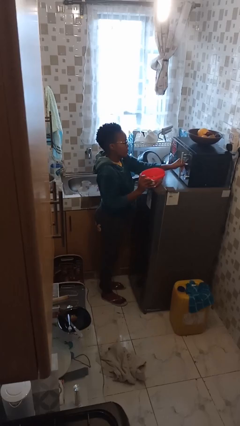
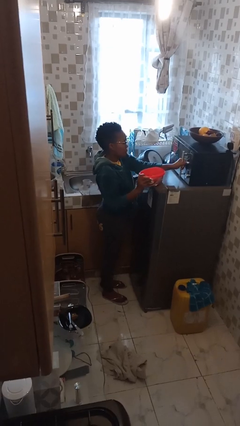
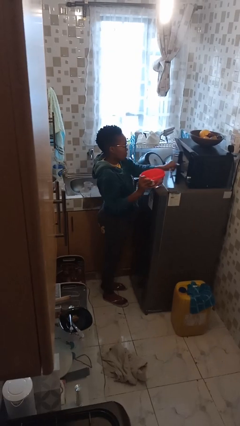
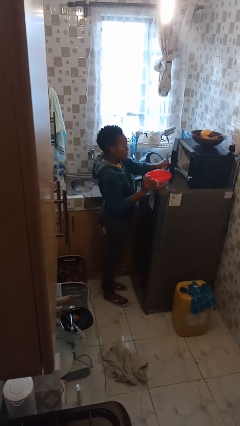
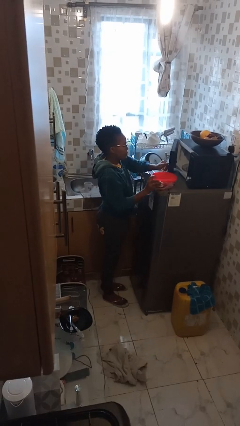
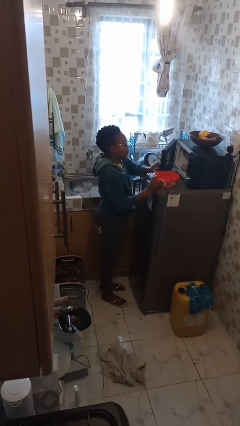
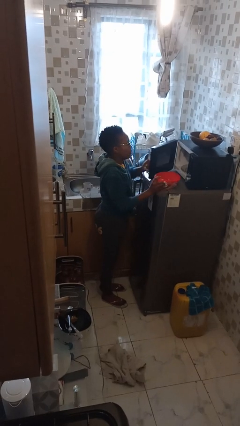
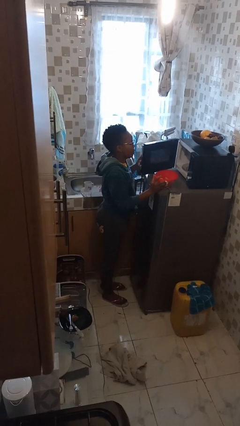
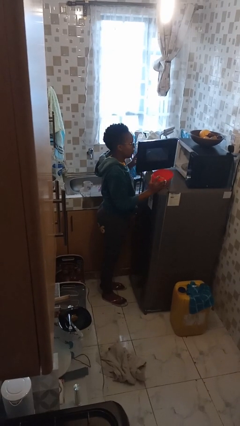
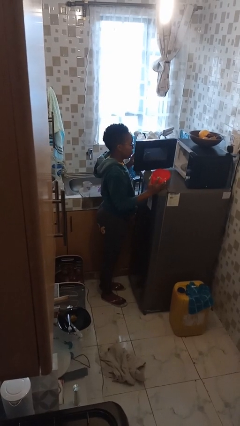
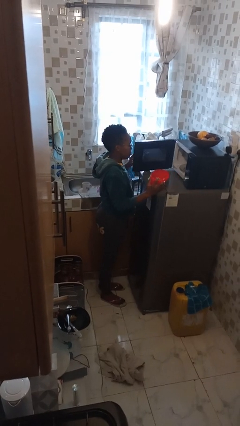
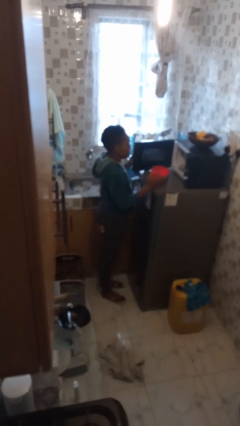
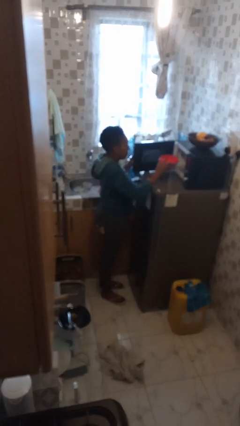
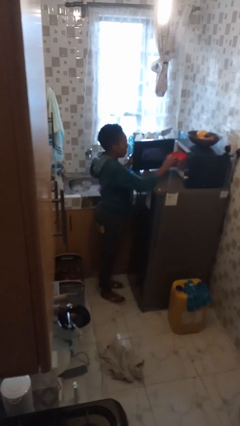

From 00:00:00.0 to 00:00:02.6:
person opens microwave

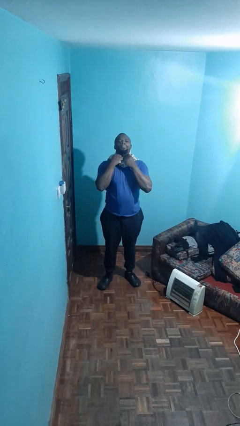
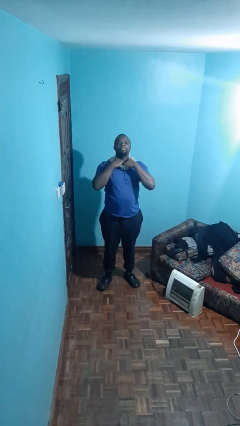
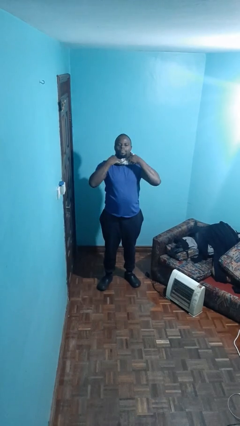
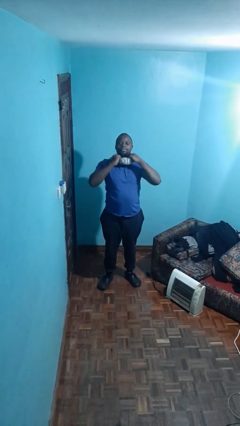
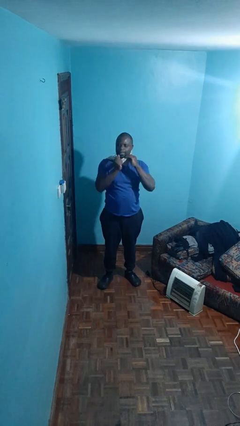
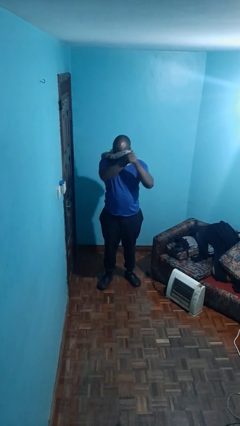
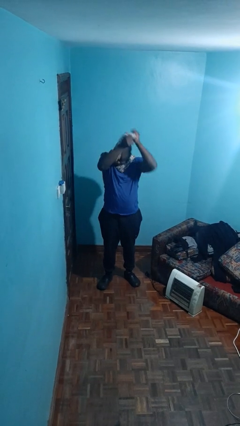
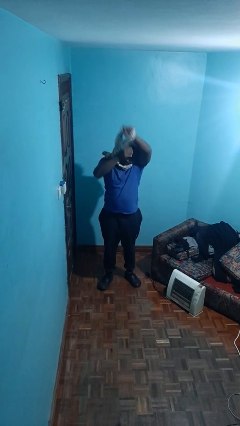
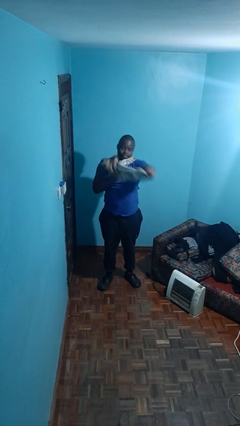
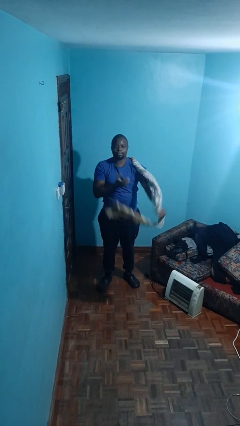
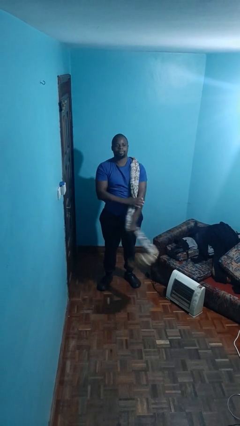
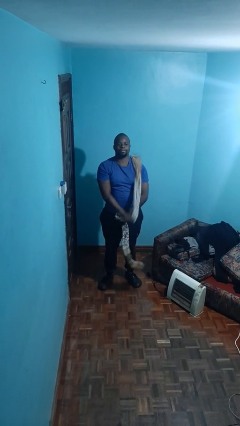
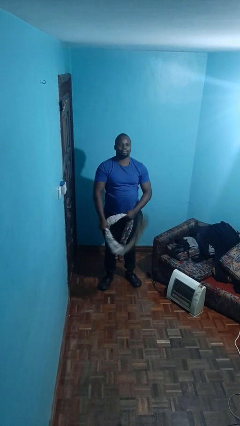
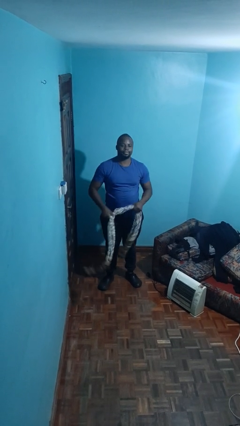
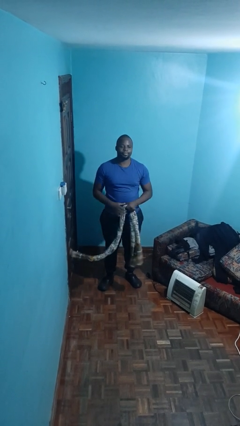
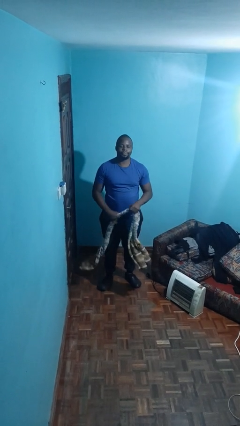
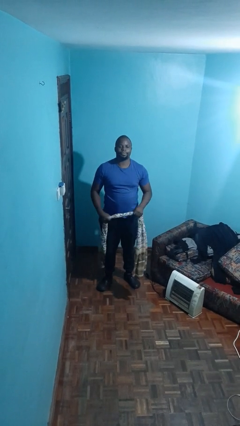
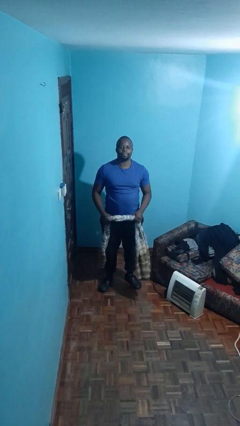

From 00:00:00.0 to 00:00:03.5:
person takes off scarf

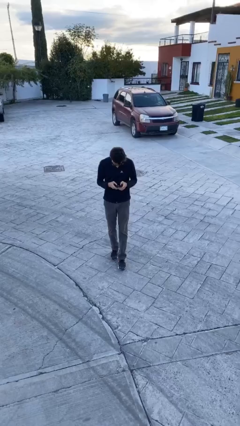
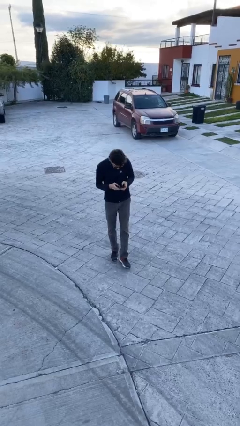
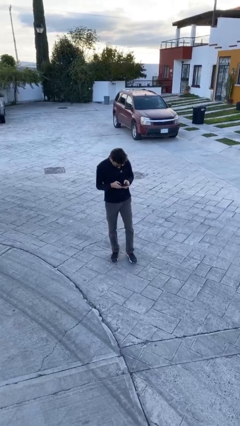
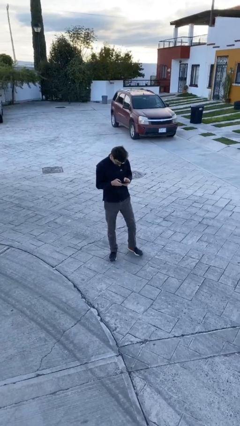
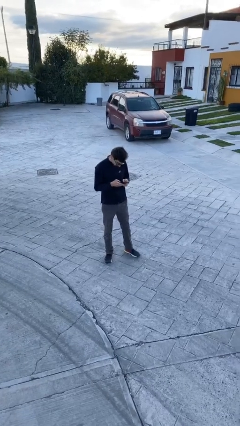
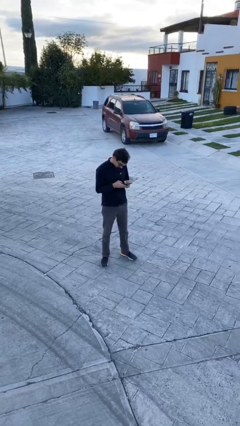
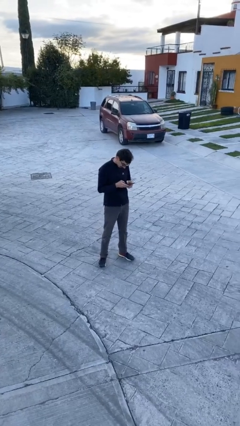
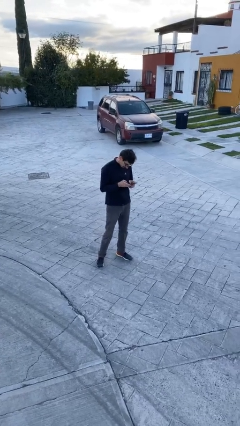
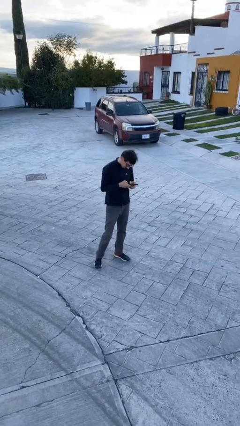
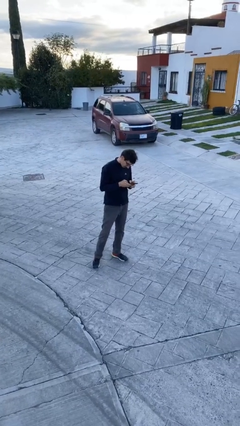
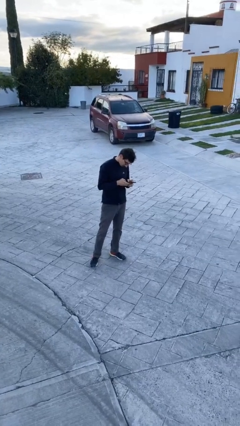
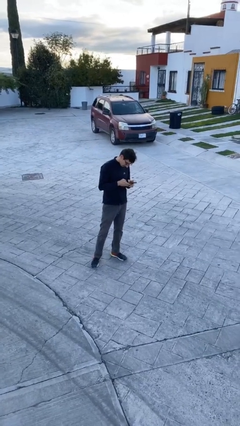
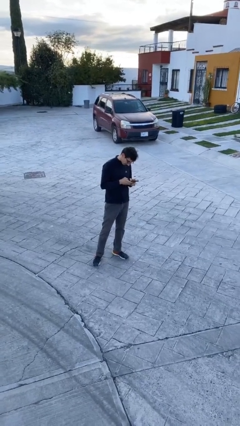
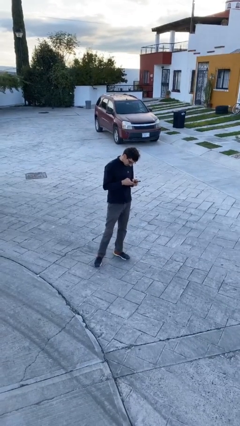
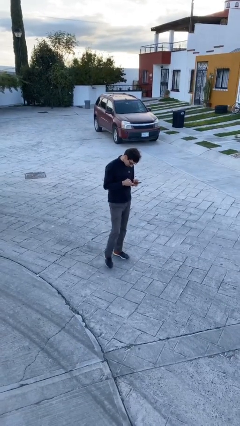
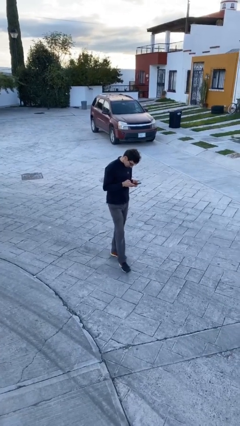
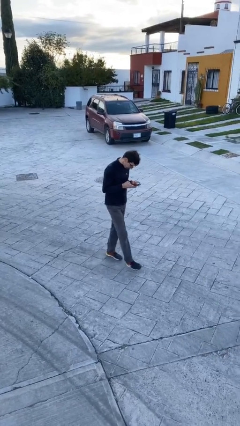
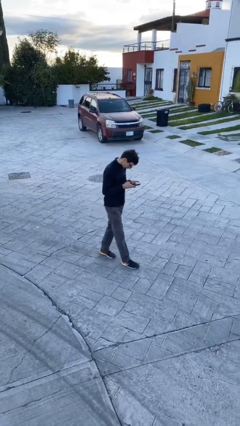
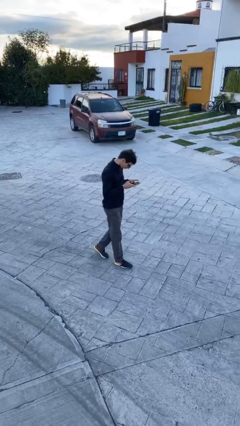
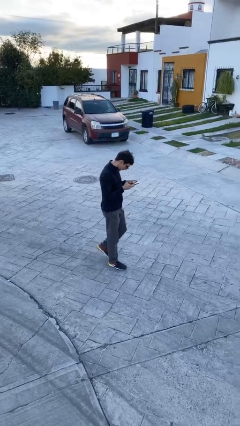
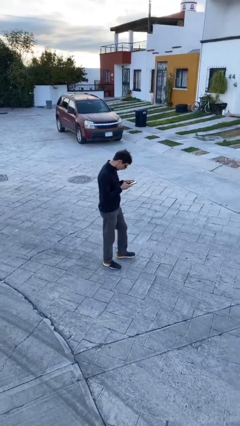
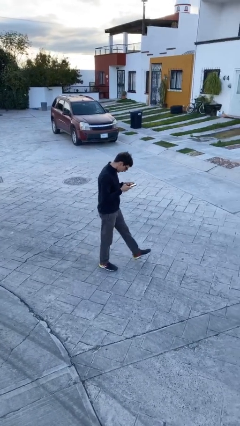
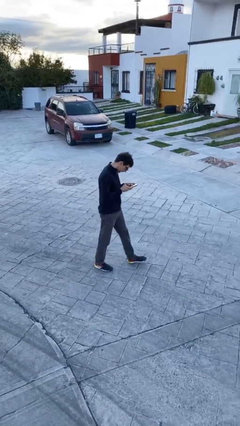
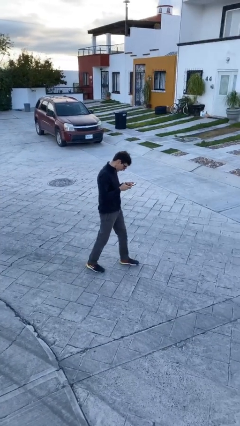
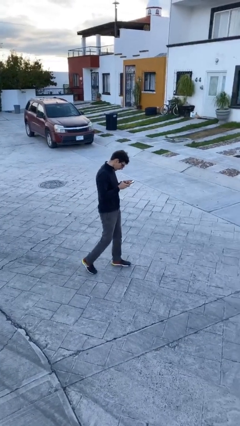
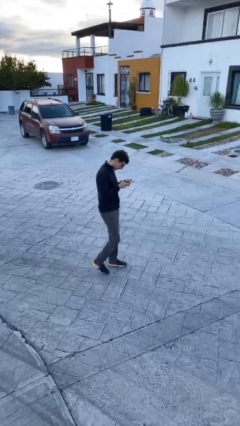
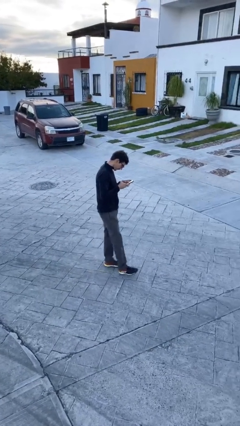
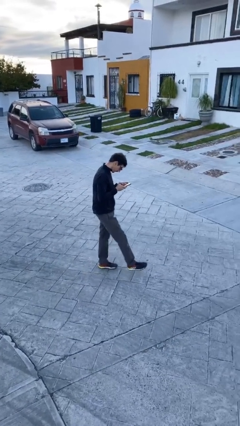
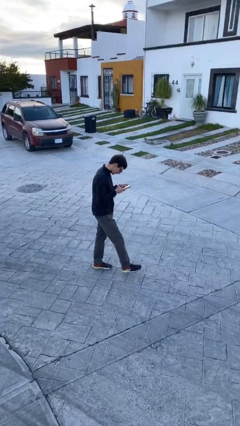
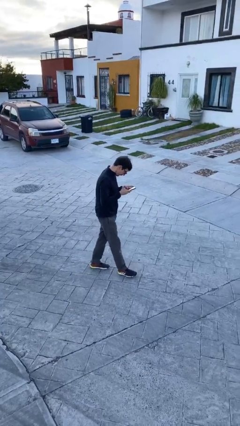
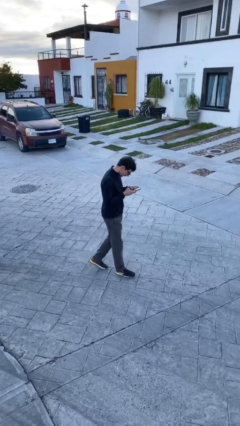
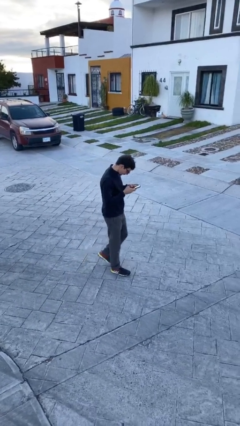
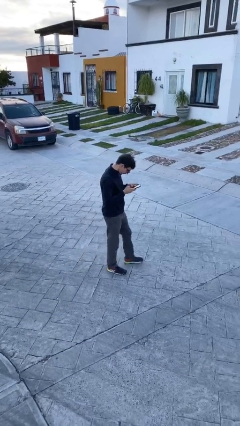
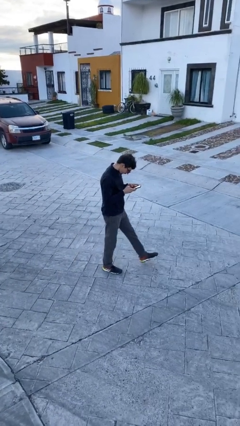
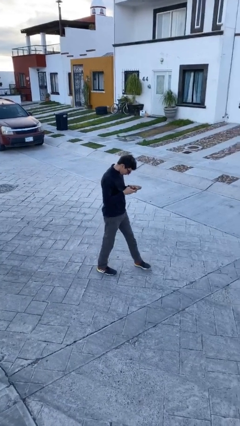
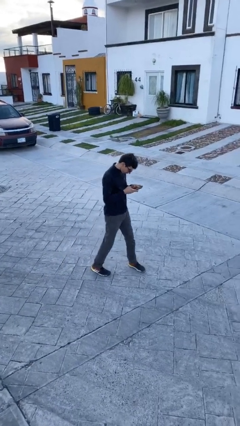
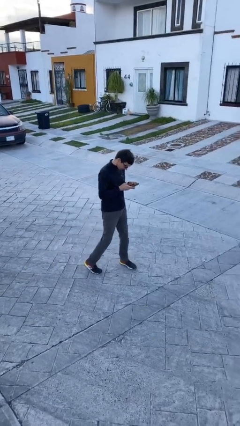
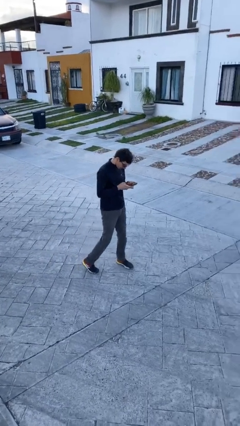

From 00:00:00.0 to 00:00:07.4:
person texts on phone

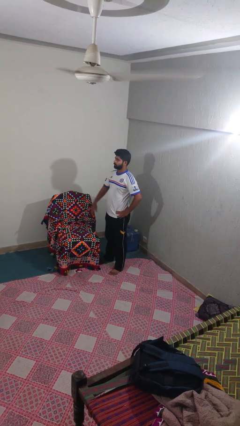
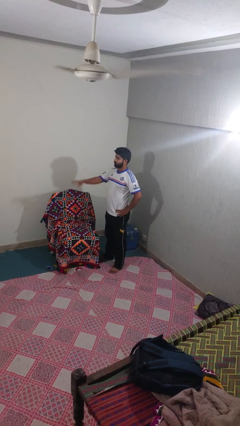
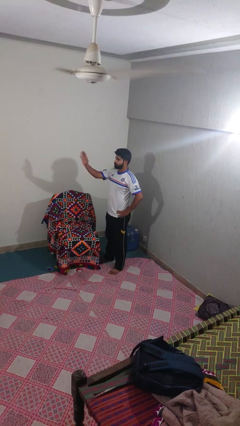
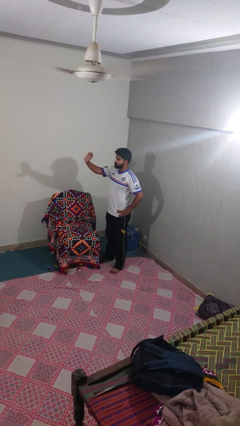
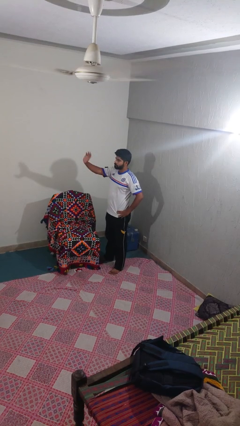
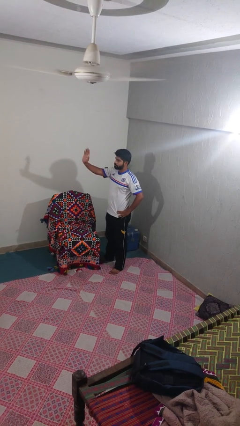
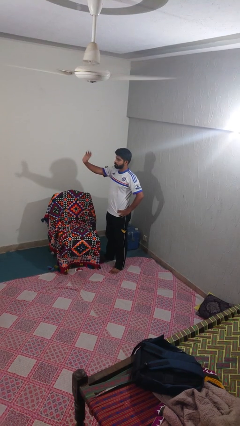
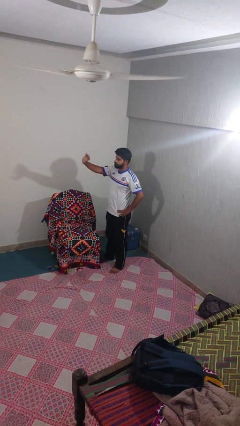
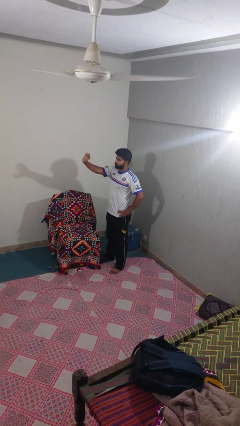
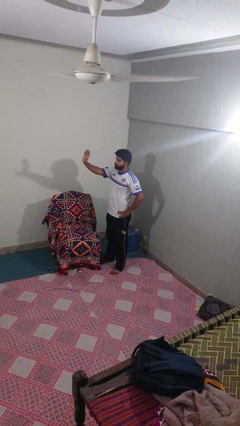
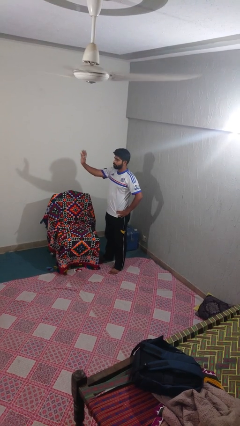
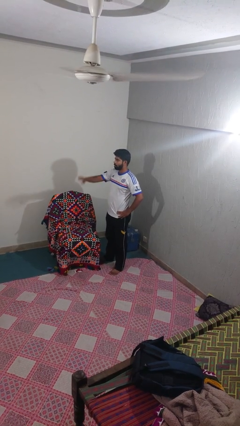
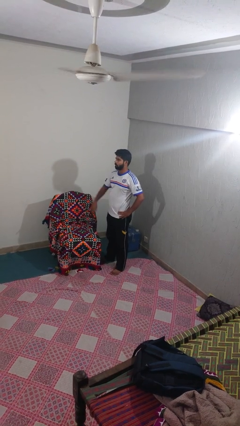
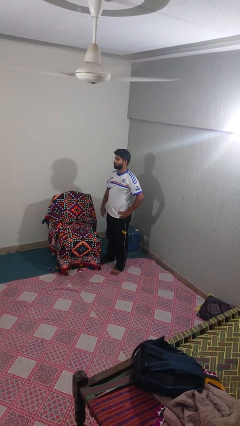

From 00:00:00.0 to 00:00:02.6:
person waves at person

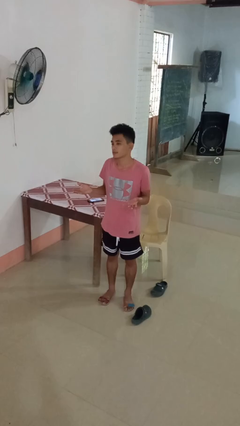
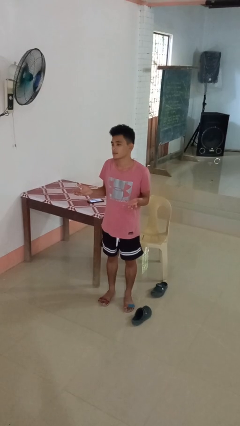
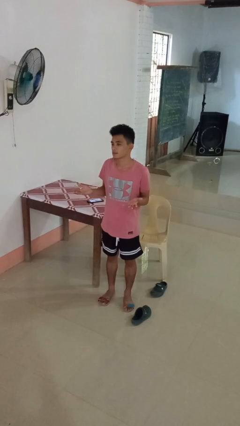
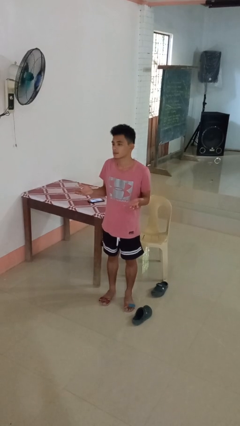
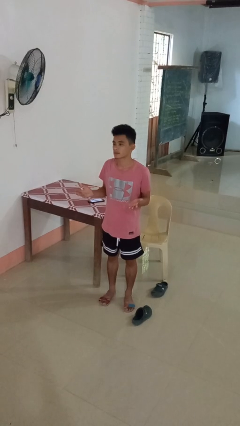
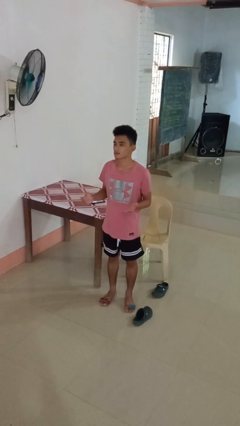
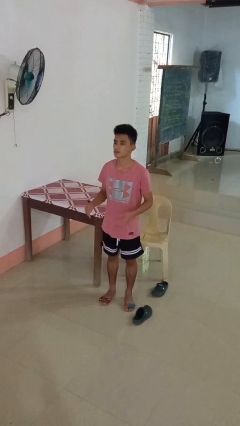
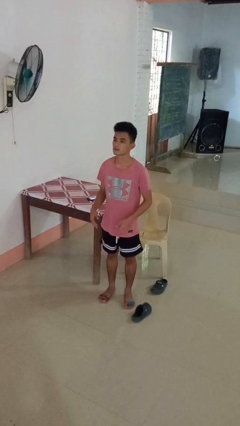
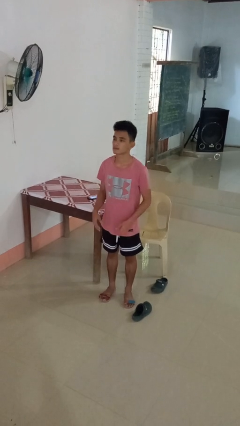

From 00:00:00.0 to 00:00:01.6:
person shrugs
